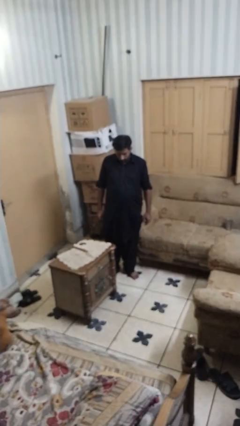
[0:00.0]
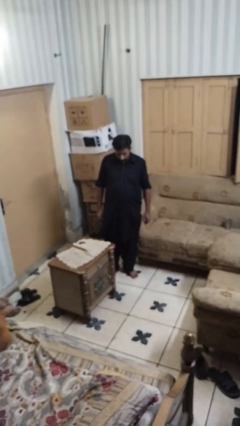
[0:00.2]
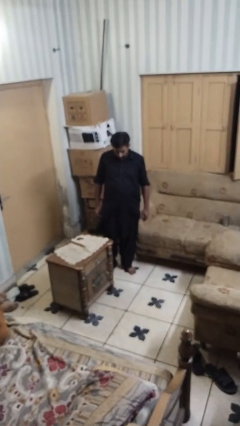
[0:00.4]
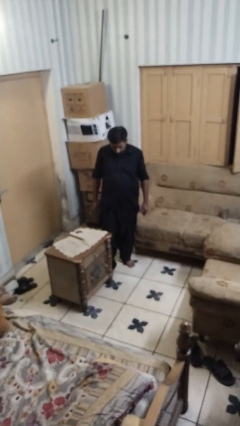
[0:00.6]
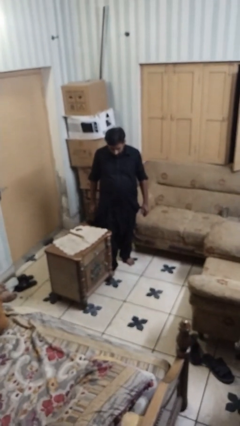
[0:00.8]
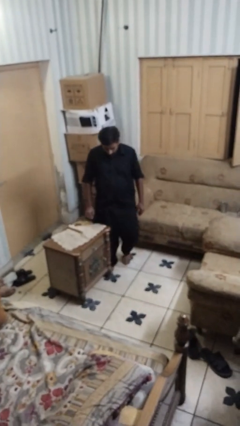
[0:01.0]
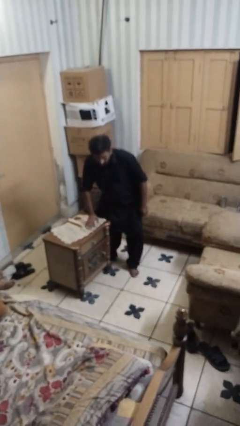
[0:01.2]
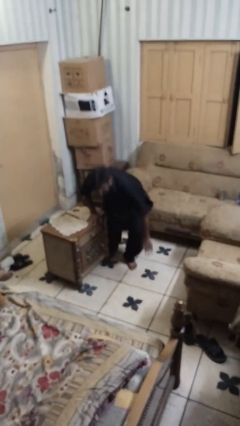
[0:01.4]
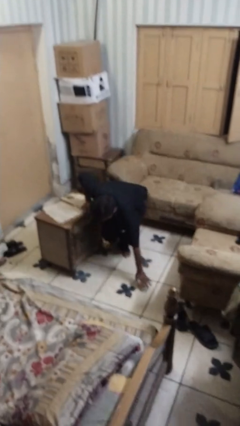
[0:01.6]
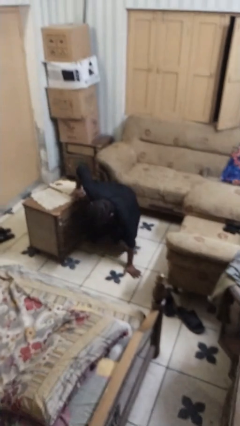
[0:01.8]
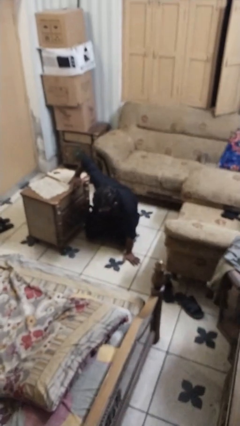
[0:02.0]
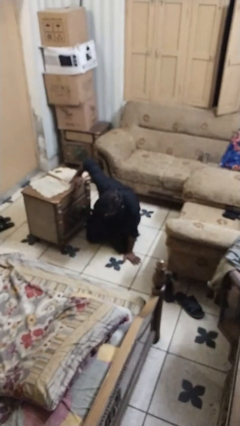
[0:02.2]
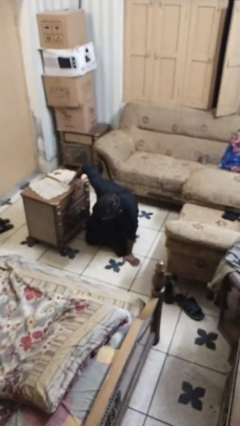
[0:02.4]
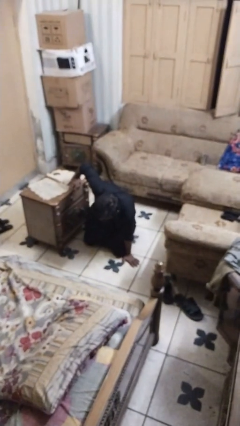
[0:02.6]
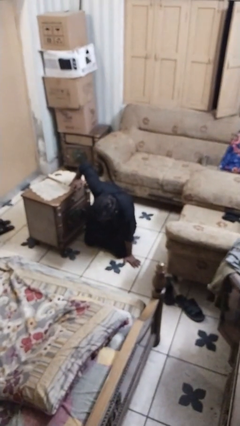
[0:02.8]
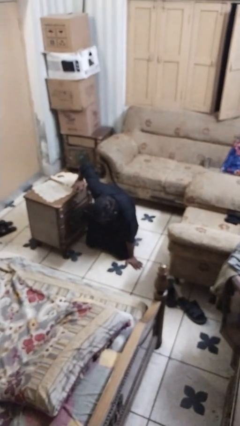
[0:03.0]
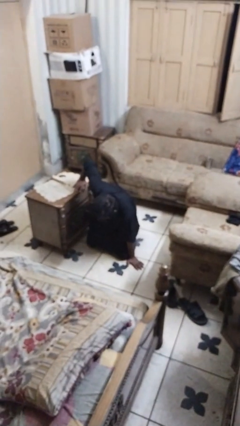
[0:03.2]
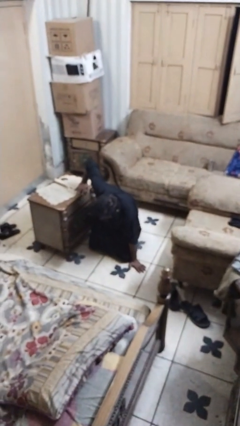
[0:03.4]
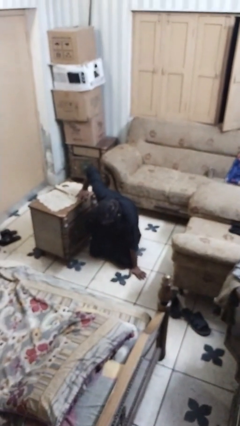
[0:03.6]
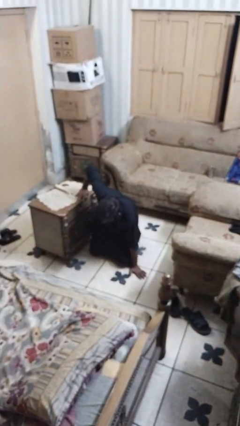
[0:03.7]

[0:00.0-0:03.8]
person bumps into table

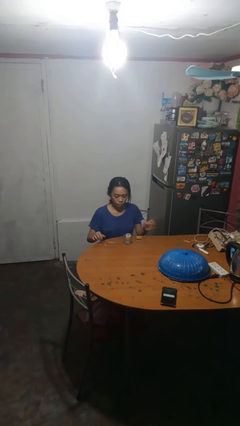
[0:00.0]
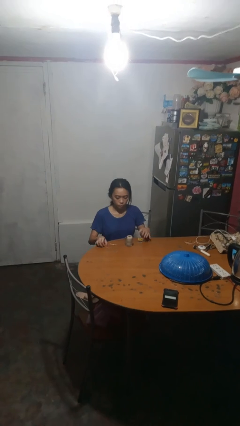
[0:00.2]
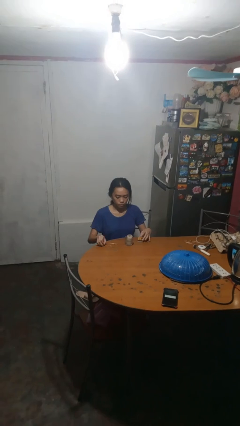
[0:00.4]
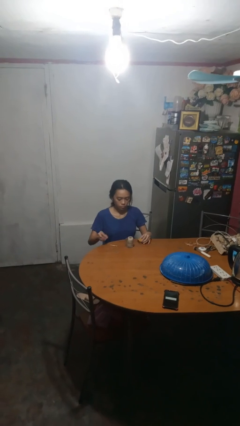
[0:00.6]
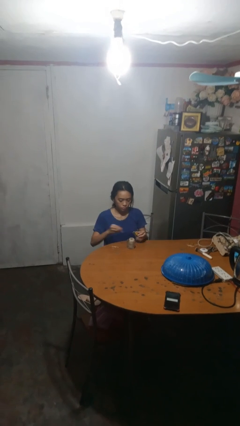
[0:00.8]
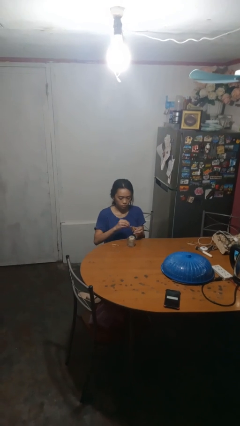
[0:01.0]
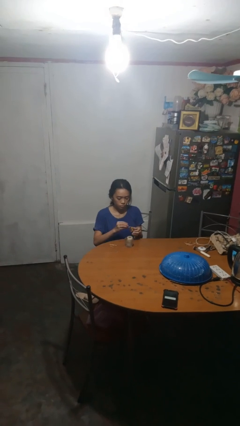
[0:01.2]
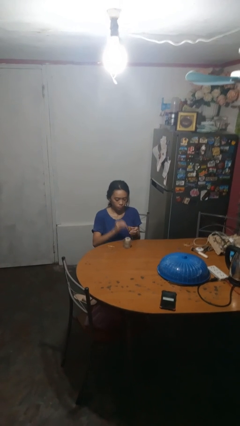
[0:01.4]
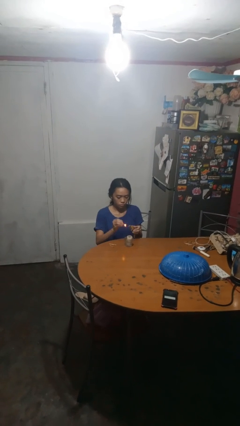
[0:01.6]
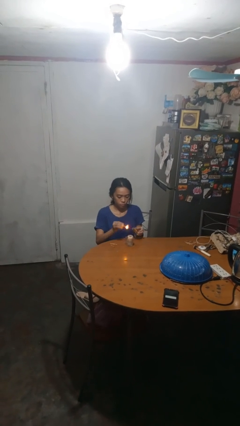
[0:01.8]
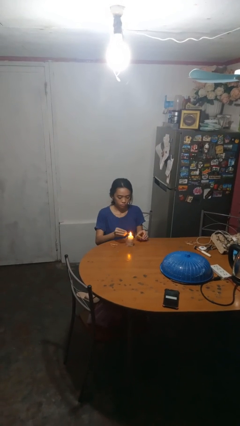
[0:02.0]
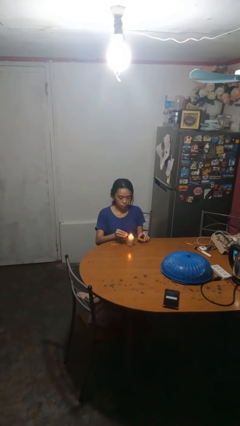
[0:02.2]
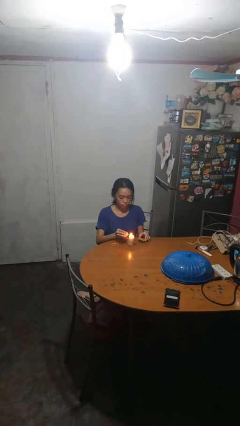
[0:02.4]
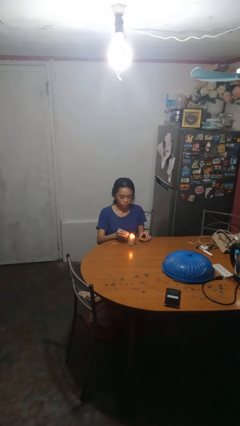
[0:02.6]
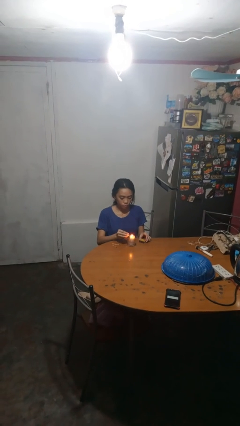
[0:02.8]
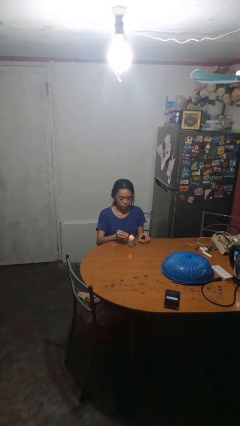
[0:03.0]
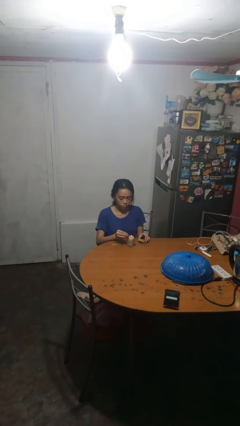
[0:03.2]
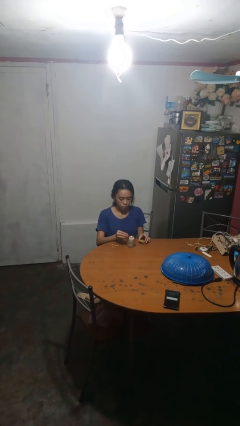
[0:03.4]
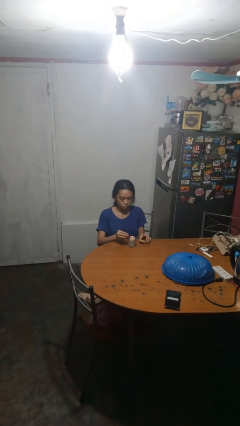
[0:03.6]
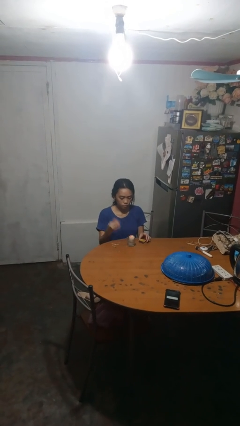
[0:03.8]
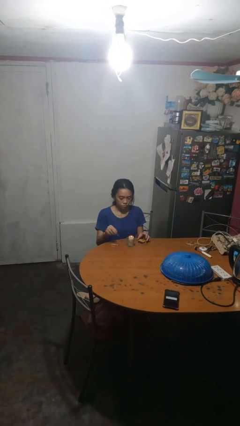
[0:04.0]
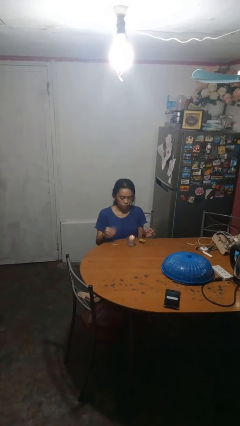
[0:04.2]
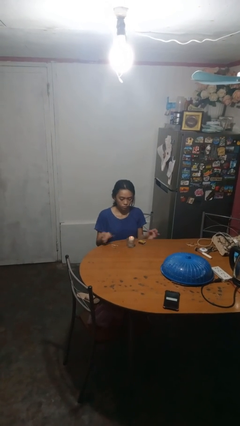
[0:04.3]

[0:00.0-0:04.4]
person lights candle

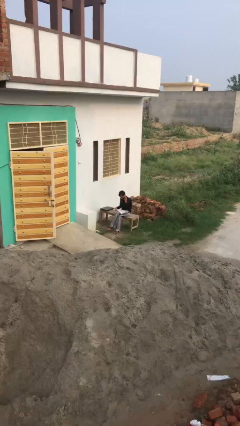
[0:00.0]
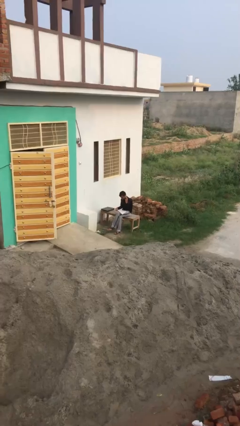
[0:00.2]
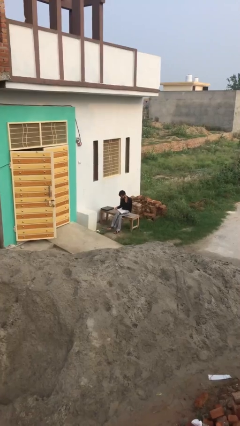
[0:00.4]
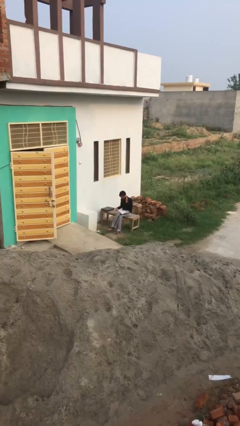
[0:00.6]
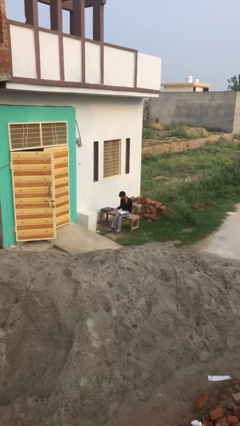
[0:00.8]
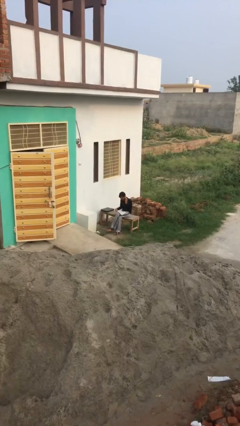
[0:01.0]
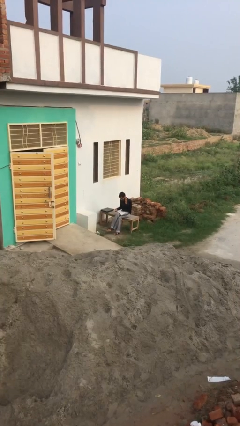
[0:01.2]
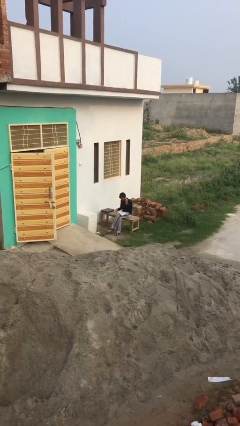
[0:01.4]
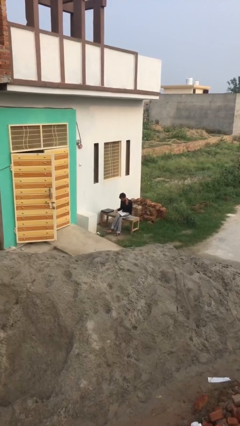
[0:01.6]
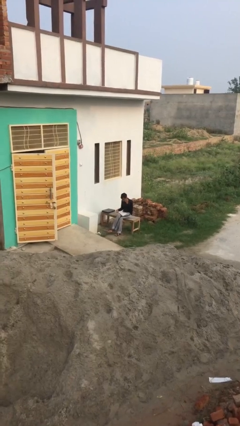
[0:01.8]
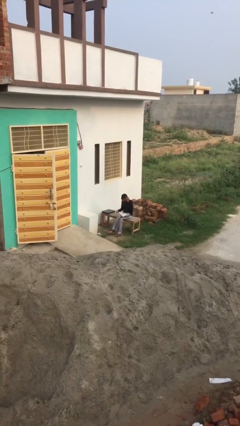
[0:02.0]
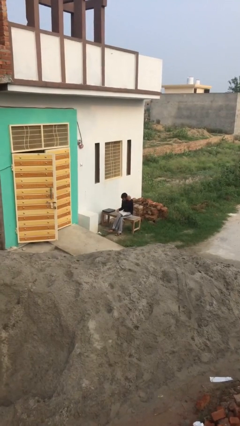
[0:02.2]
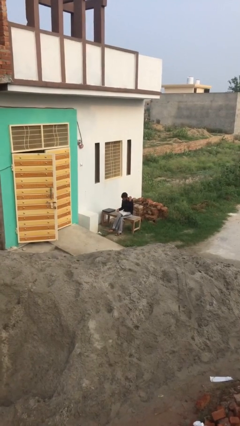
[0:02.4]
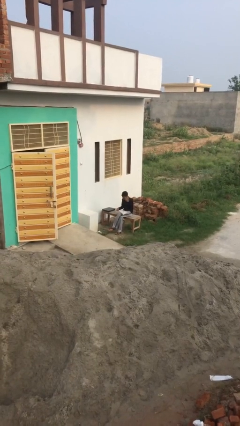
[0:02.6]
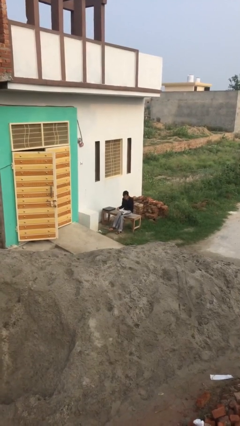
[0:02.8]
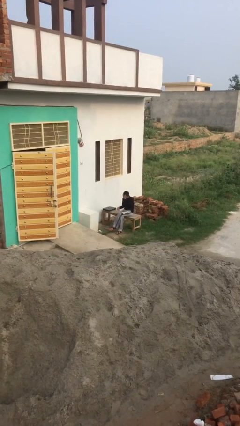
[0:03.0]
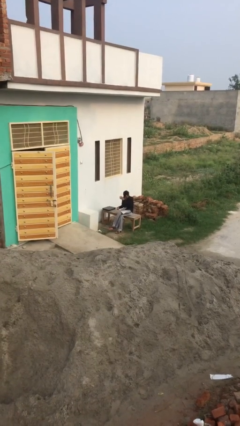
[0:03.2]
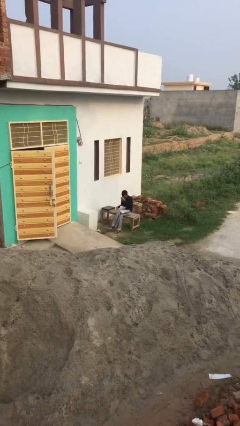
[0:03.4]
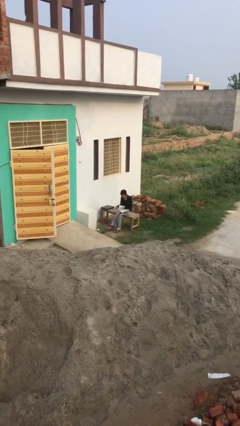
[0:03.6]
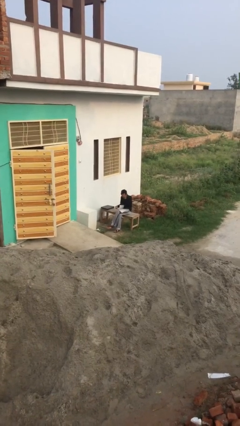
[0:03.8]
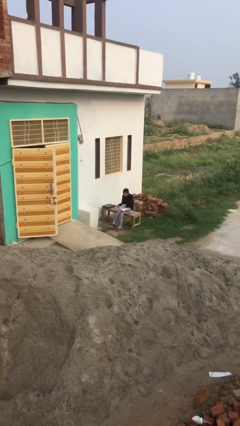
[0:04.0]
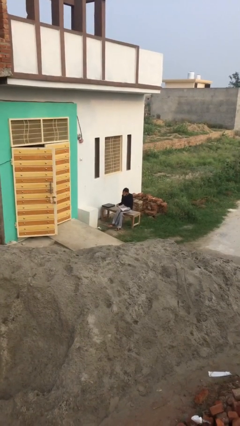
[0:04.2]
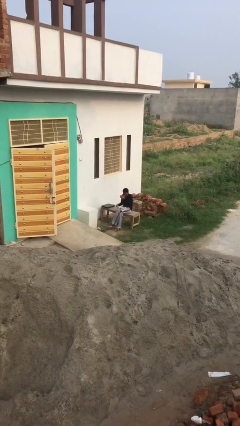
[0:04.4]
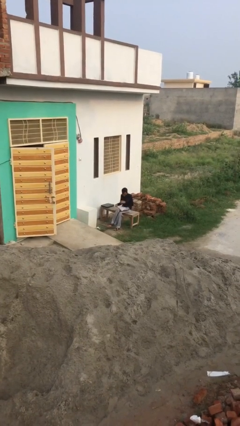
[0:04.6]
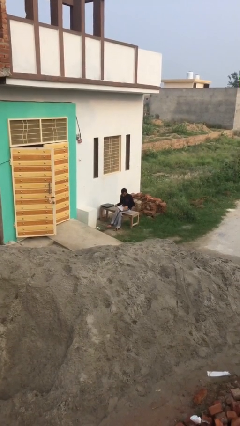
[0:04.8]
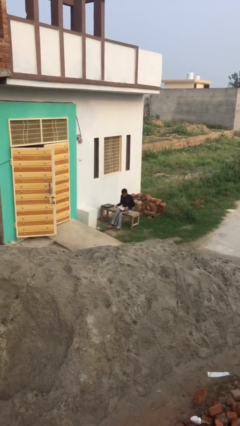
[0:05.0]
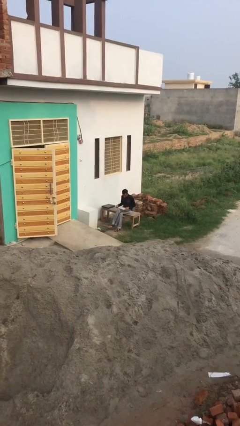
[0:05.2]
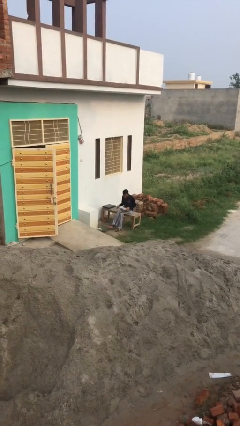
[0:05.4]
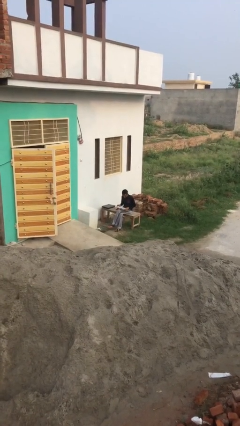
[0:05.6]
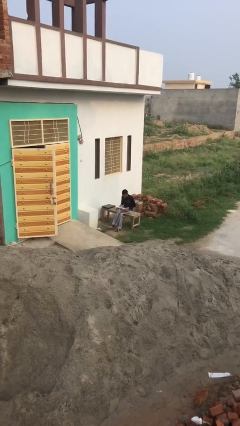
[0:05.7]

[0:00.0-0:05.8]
person reads document

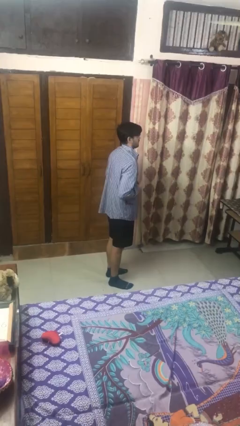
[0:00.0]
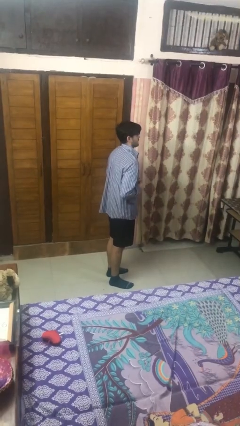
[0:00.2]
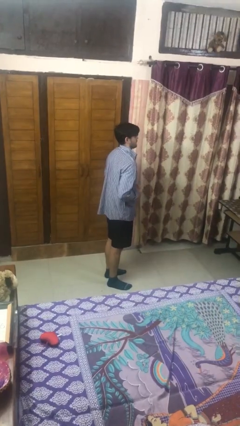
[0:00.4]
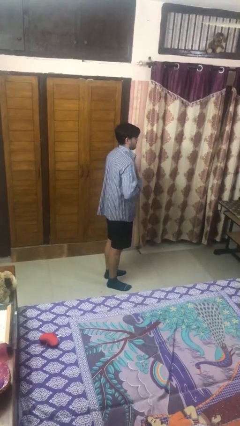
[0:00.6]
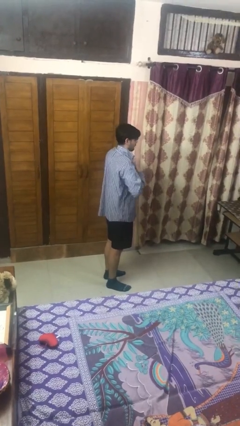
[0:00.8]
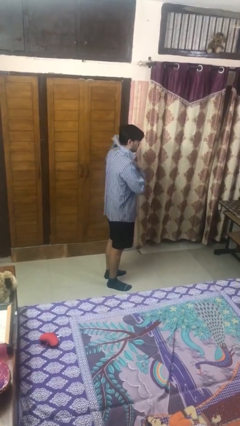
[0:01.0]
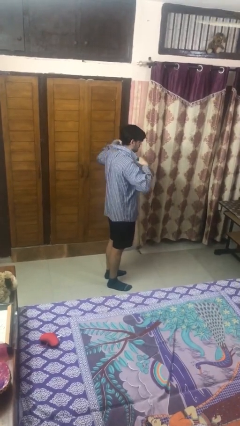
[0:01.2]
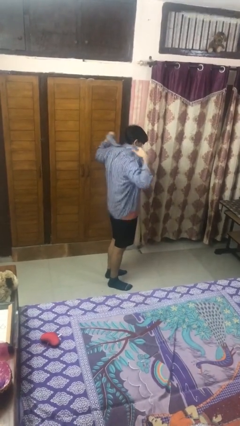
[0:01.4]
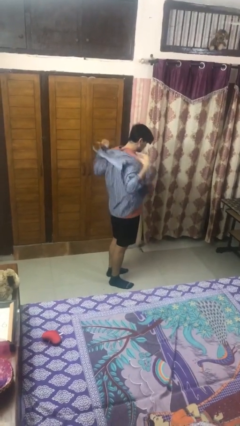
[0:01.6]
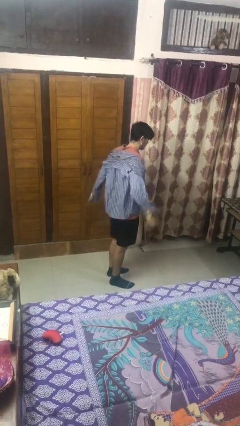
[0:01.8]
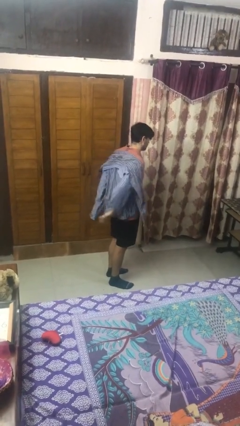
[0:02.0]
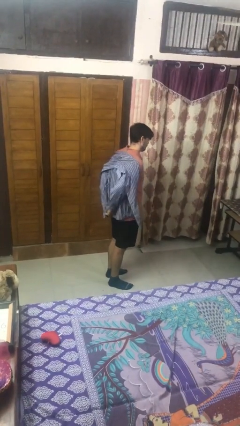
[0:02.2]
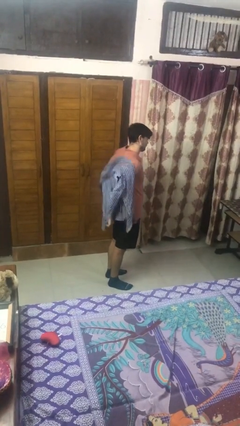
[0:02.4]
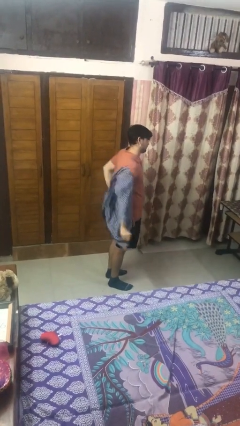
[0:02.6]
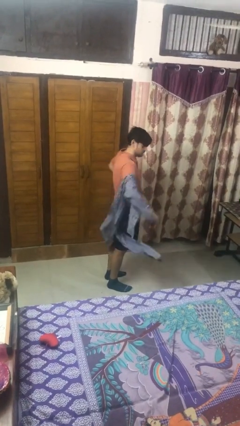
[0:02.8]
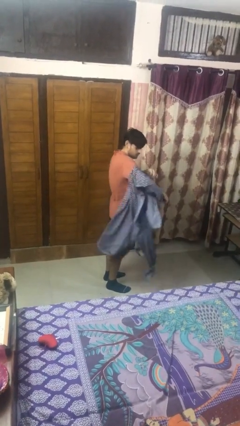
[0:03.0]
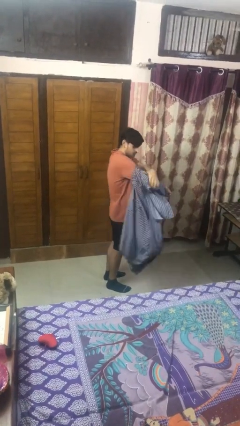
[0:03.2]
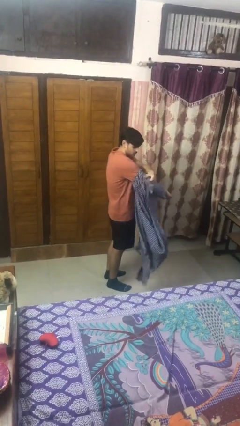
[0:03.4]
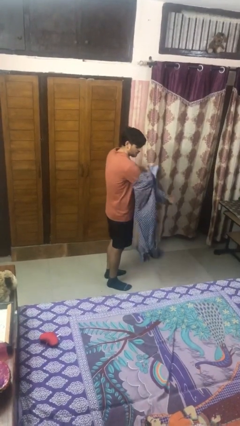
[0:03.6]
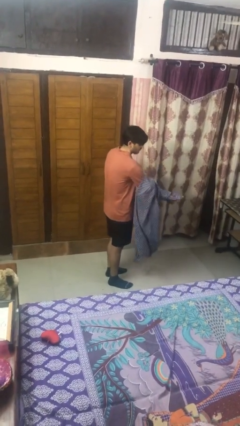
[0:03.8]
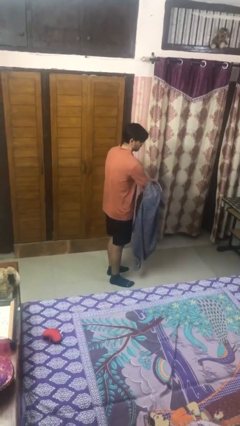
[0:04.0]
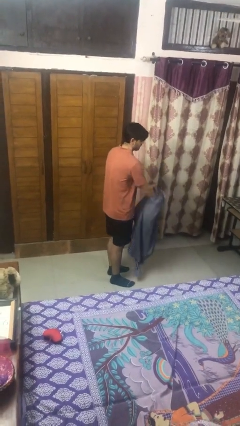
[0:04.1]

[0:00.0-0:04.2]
person takes off shirt
